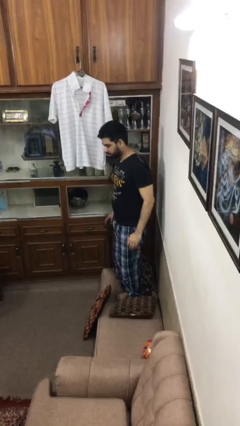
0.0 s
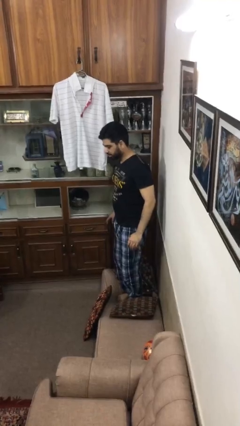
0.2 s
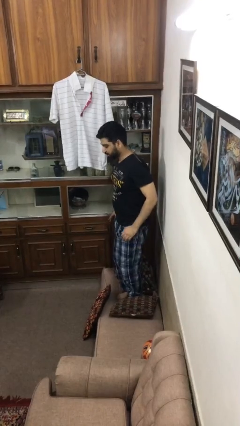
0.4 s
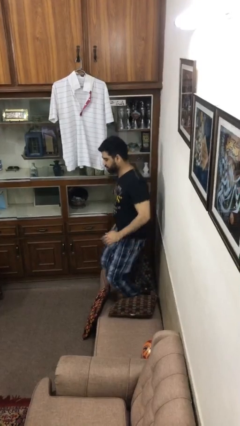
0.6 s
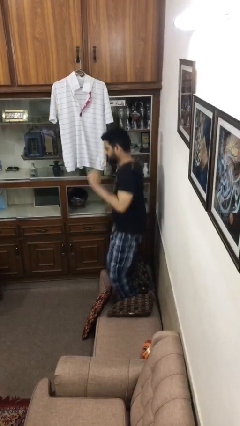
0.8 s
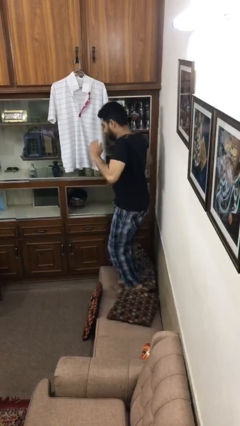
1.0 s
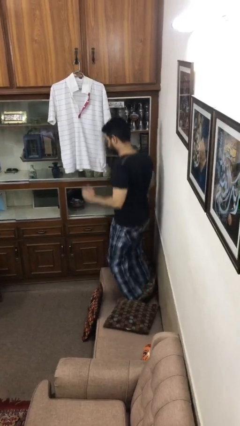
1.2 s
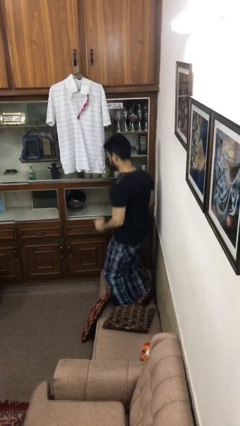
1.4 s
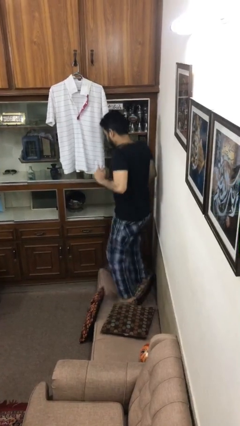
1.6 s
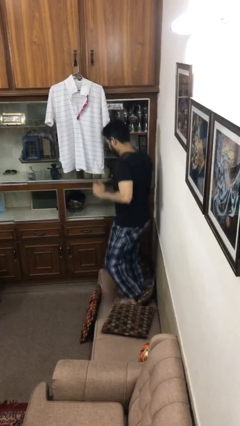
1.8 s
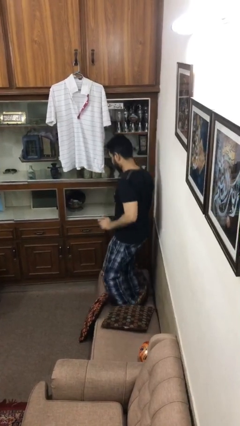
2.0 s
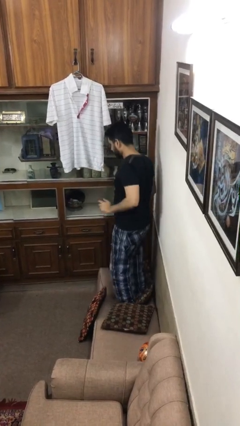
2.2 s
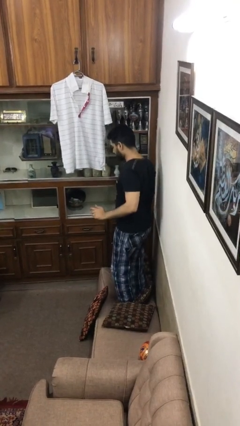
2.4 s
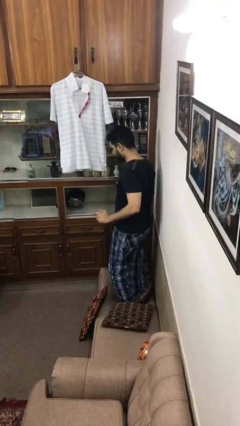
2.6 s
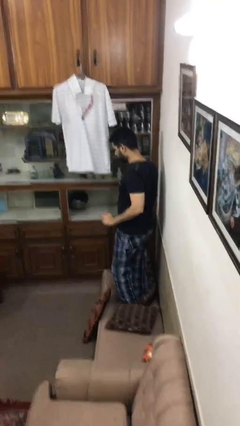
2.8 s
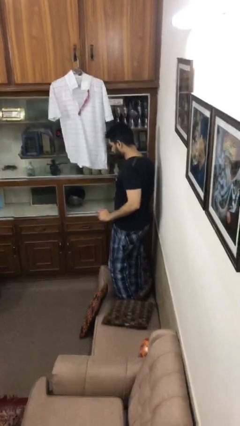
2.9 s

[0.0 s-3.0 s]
person jumps on couch

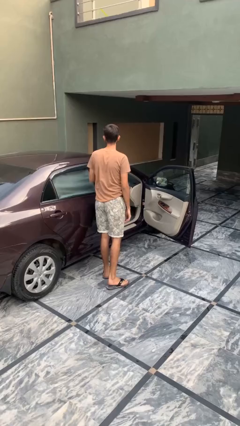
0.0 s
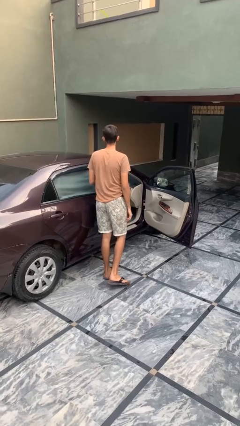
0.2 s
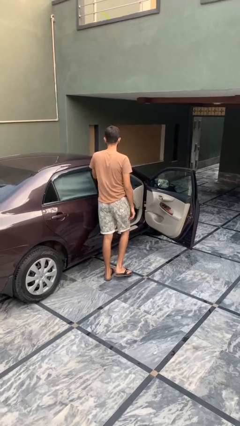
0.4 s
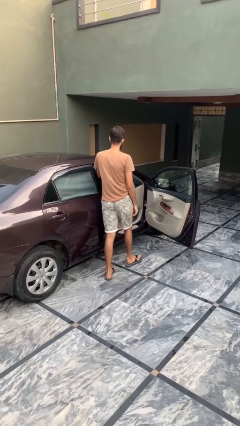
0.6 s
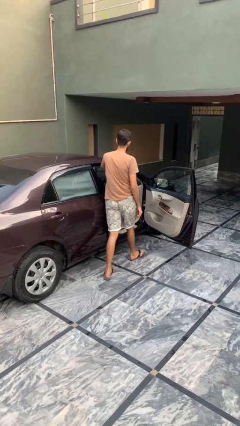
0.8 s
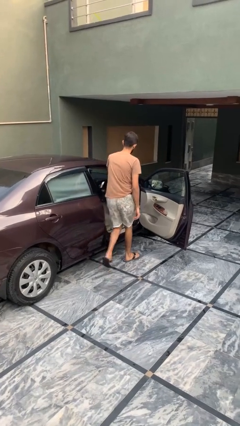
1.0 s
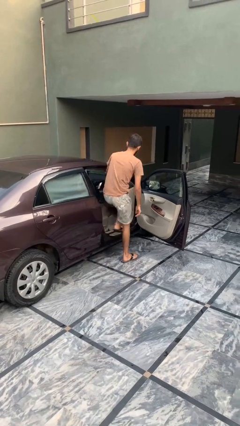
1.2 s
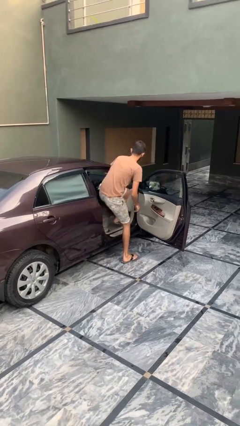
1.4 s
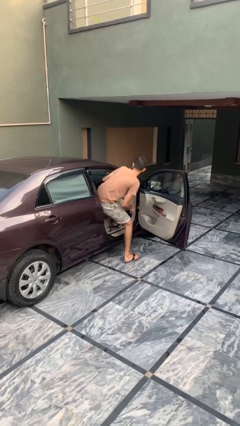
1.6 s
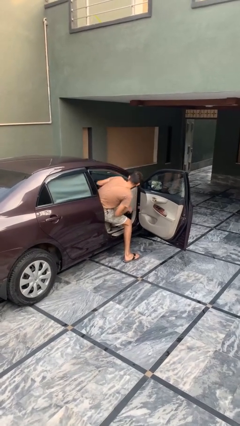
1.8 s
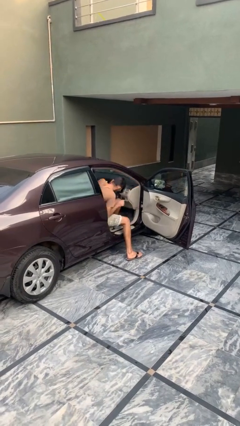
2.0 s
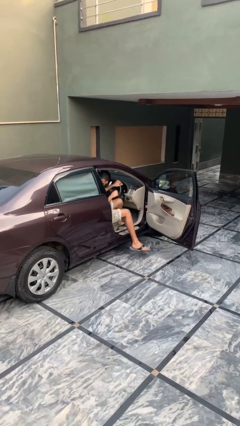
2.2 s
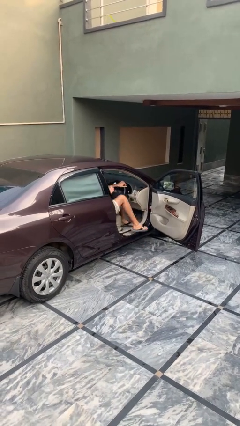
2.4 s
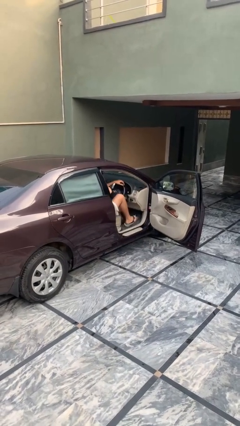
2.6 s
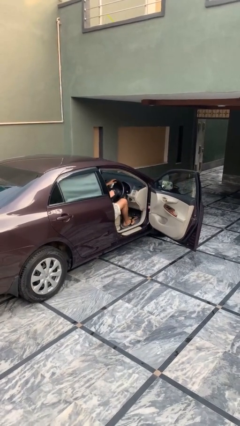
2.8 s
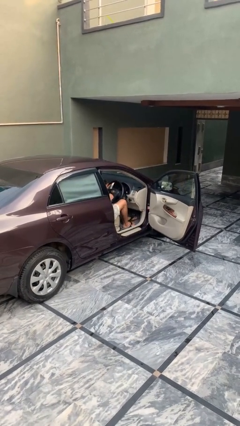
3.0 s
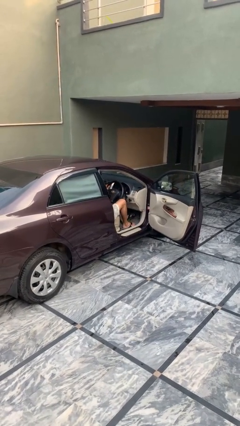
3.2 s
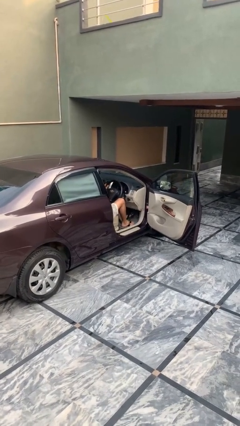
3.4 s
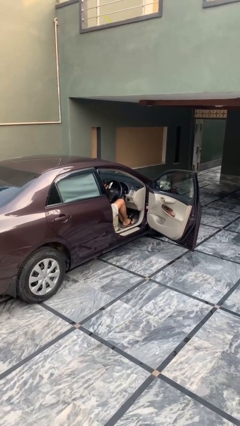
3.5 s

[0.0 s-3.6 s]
person enters car

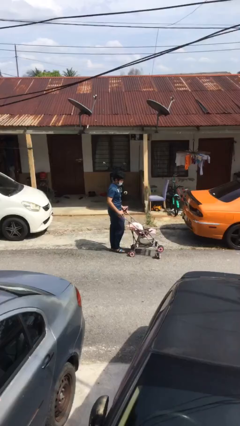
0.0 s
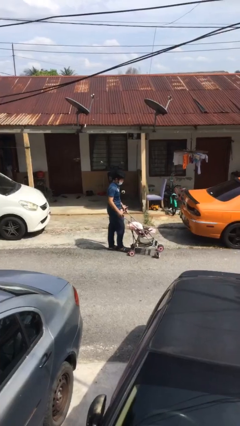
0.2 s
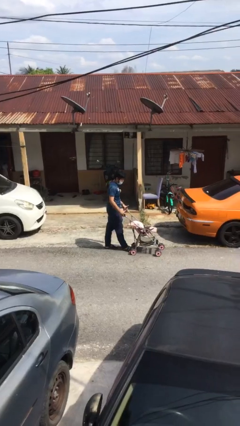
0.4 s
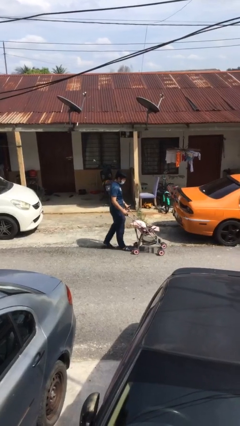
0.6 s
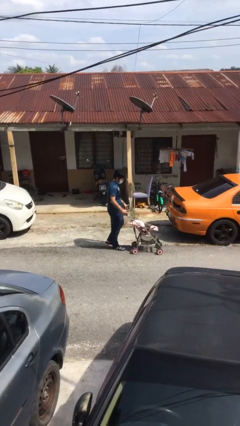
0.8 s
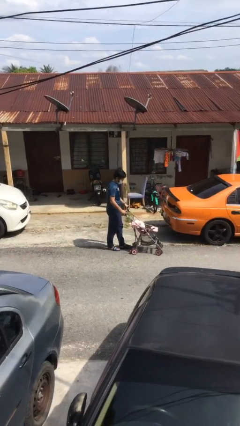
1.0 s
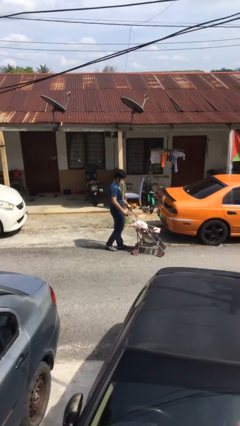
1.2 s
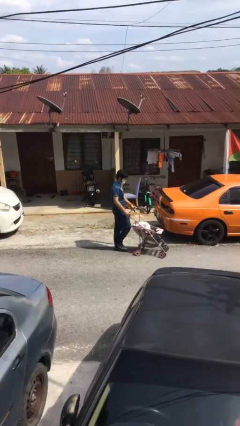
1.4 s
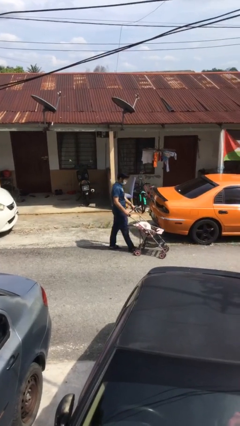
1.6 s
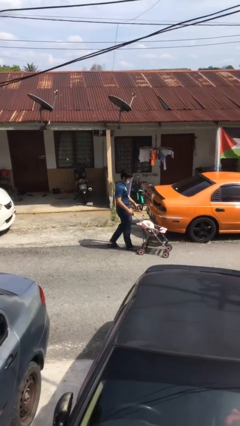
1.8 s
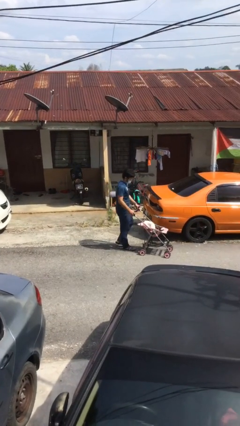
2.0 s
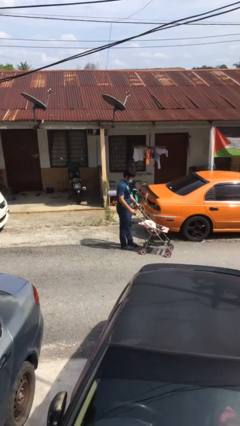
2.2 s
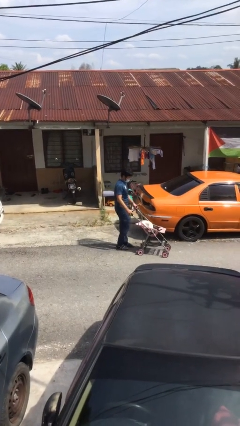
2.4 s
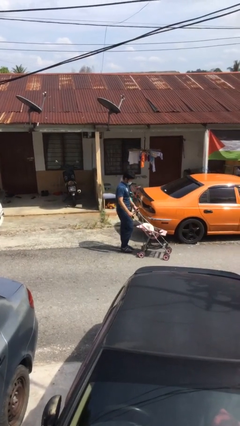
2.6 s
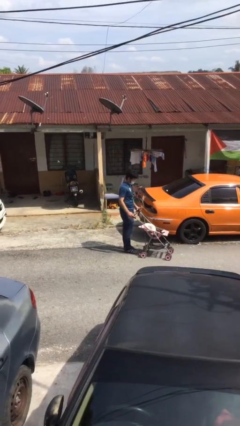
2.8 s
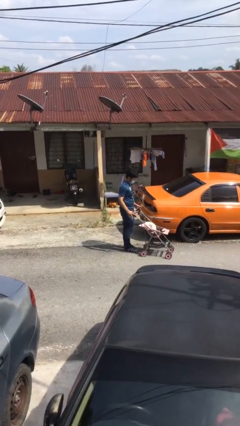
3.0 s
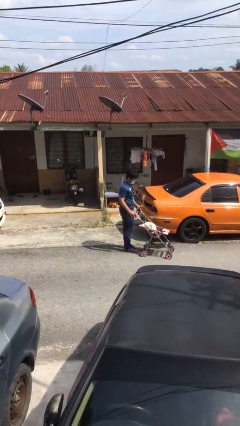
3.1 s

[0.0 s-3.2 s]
person pushes wheeled cart

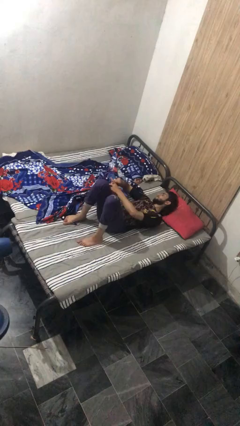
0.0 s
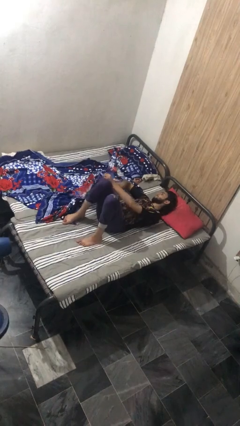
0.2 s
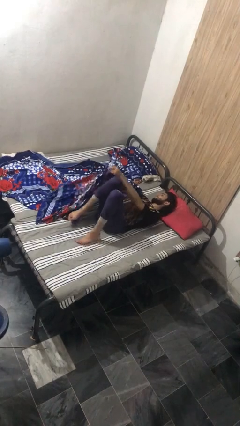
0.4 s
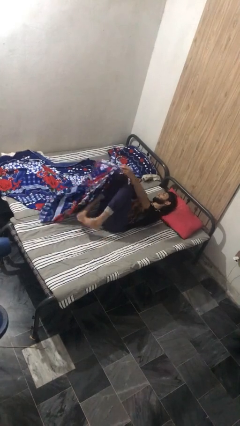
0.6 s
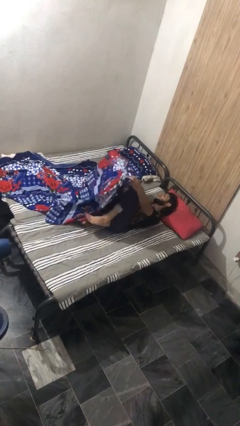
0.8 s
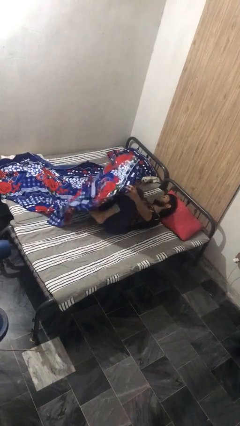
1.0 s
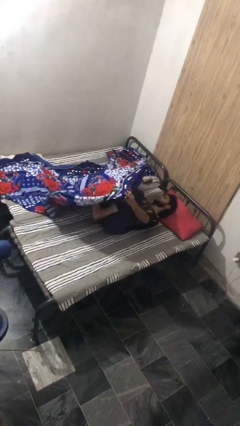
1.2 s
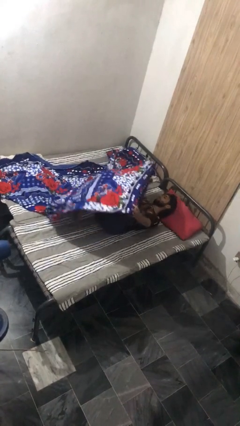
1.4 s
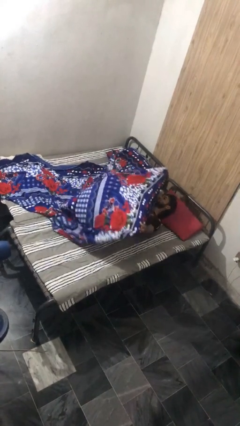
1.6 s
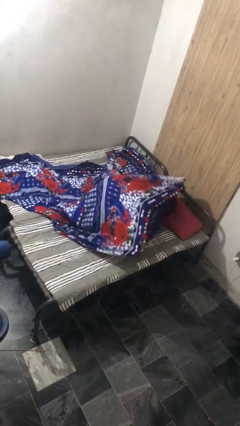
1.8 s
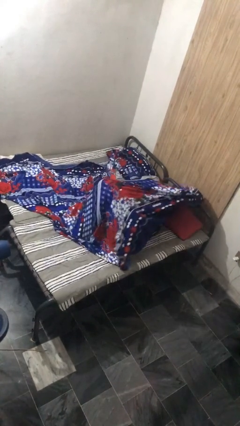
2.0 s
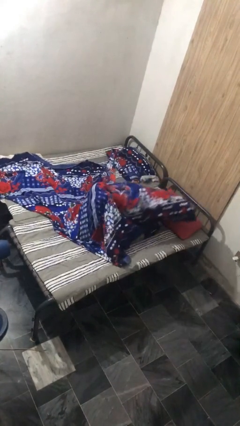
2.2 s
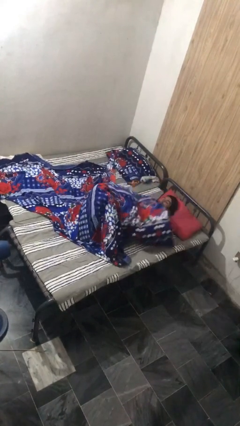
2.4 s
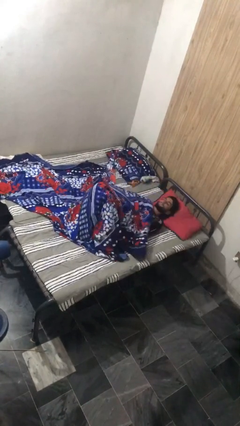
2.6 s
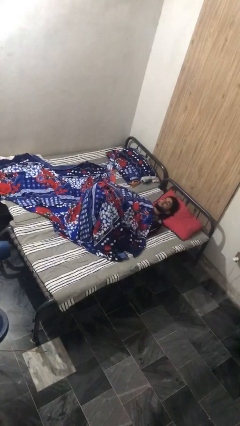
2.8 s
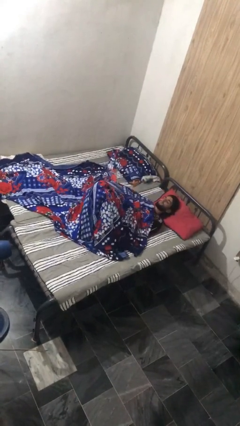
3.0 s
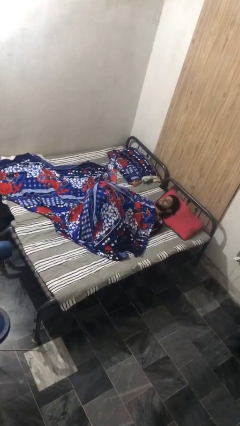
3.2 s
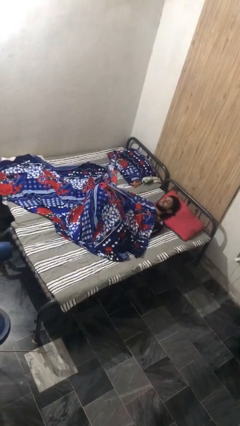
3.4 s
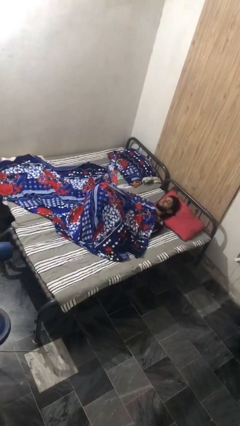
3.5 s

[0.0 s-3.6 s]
person covers with bedsheets

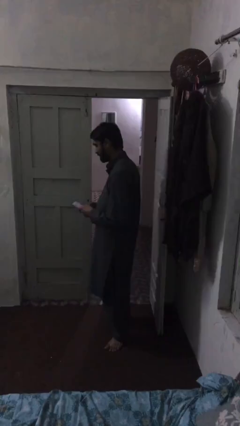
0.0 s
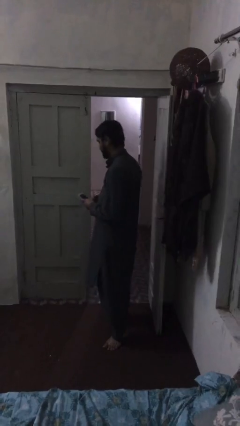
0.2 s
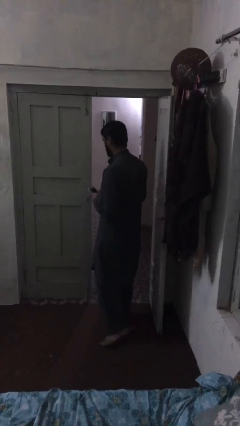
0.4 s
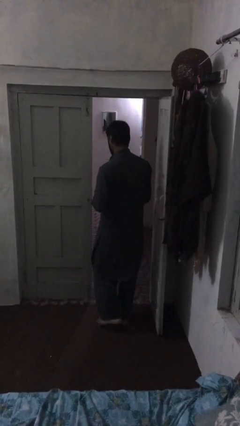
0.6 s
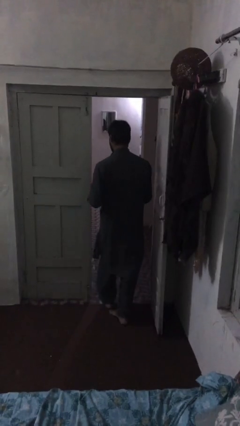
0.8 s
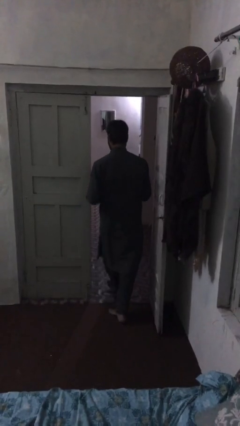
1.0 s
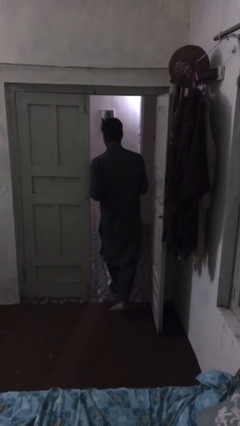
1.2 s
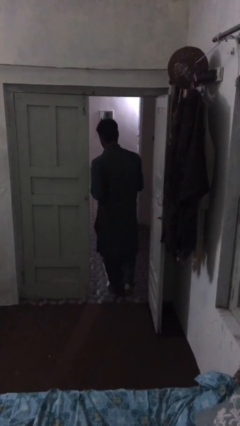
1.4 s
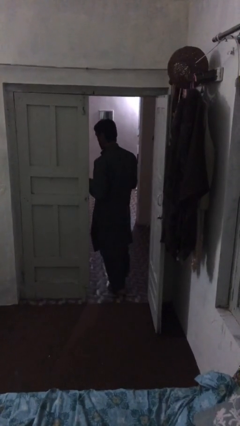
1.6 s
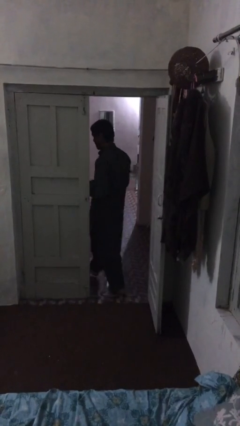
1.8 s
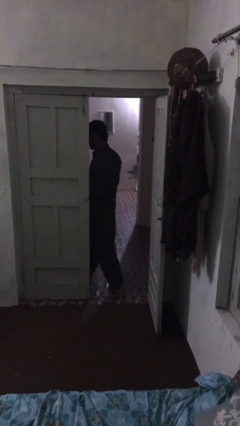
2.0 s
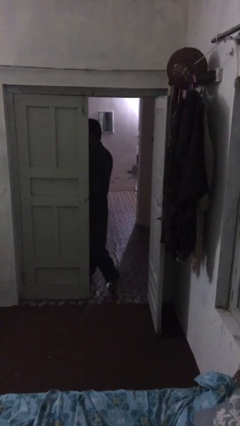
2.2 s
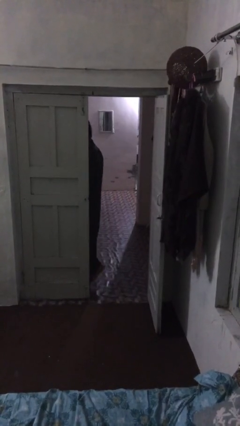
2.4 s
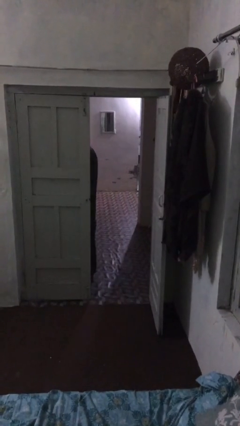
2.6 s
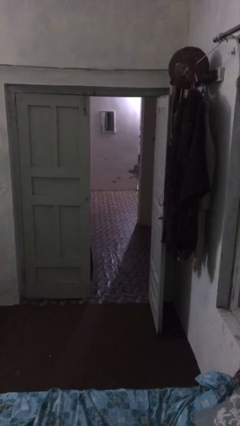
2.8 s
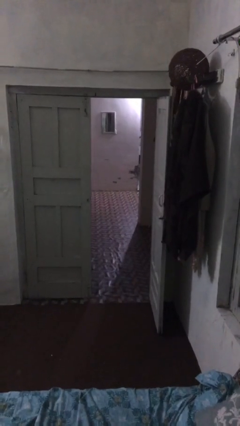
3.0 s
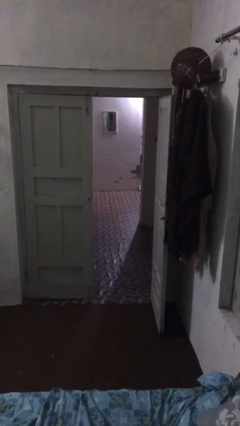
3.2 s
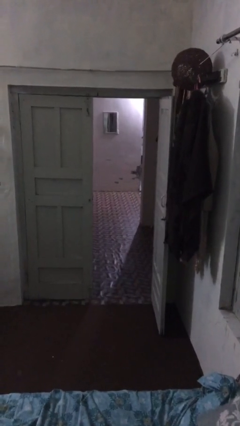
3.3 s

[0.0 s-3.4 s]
person exits scene through structure

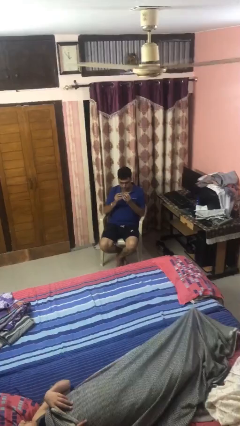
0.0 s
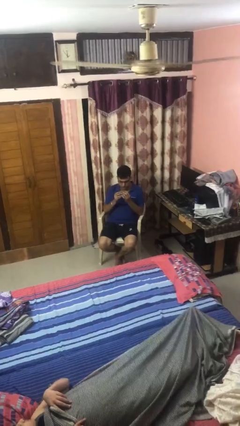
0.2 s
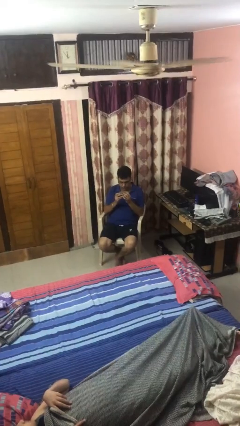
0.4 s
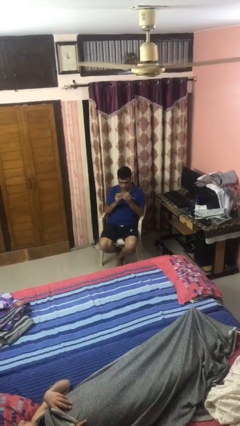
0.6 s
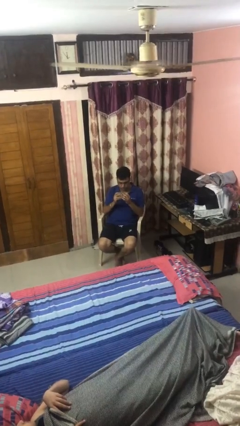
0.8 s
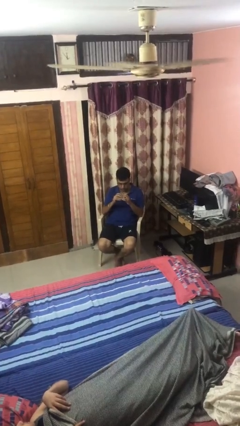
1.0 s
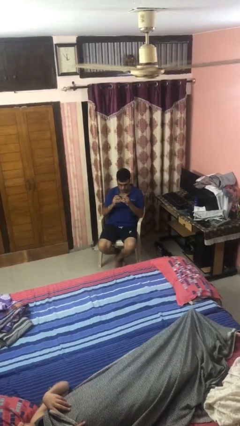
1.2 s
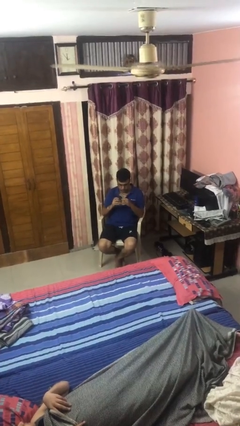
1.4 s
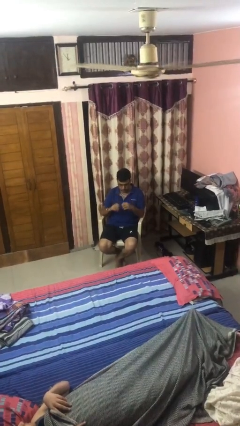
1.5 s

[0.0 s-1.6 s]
person clips fingernails
